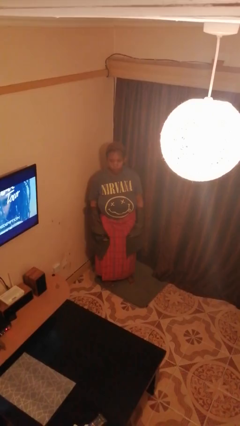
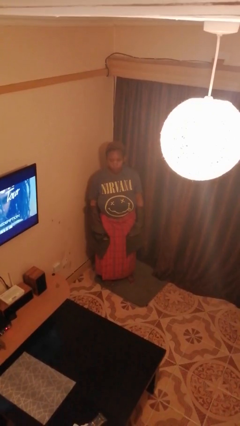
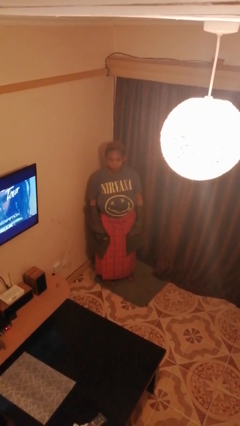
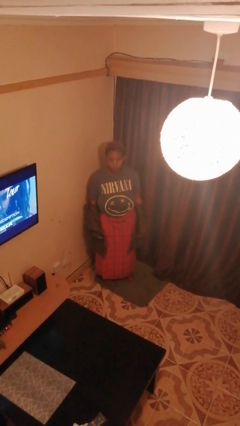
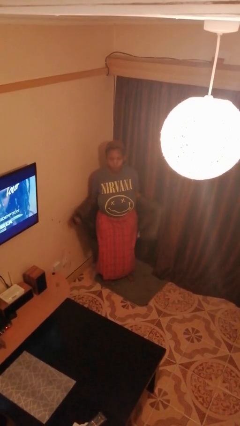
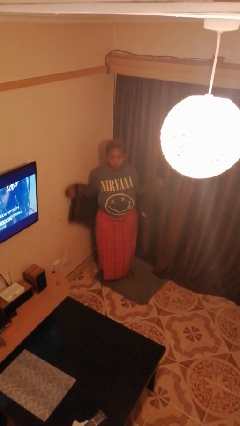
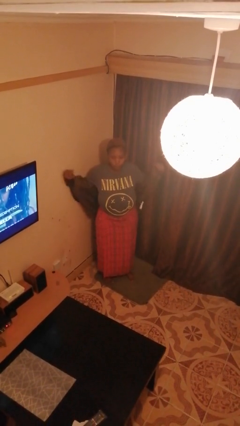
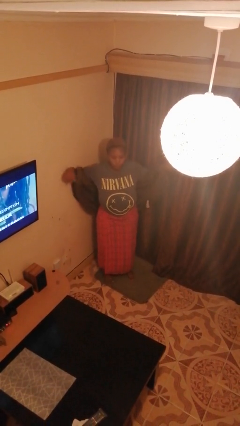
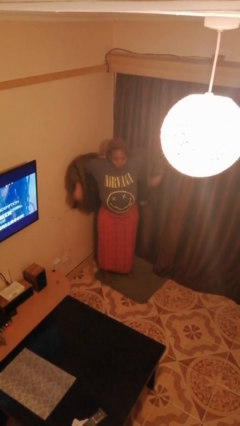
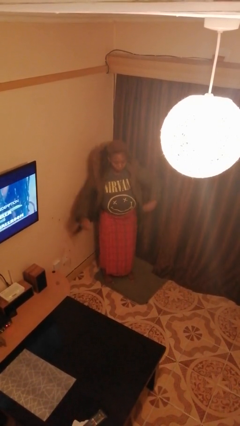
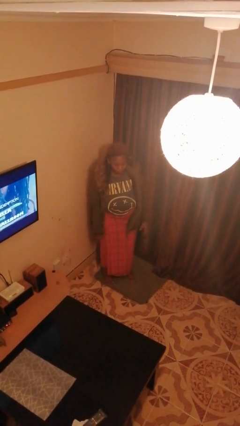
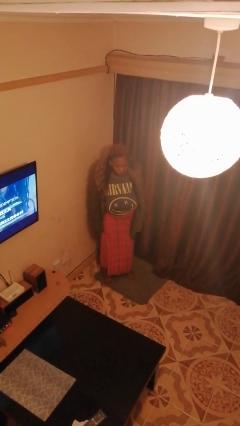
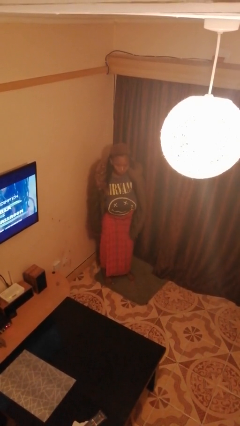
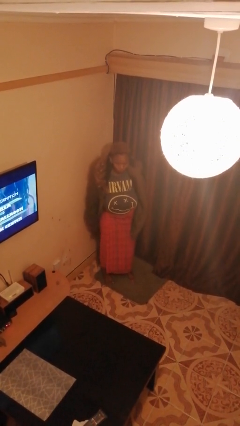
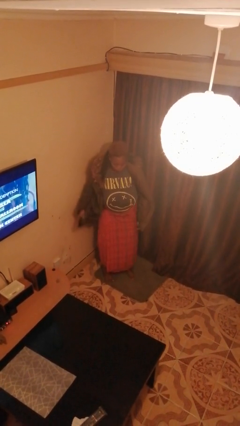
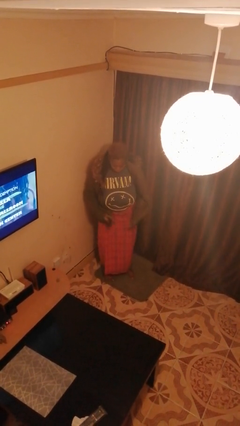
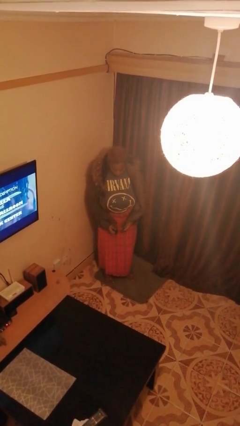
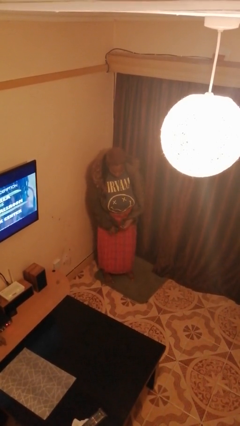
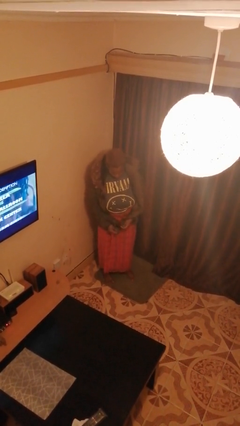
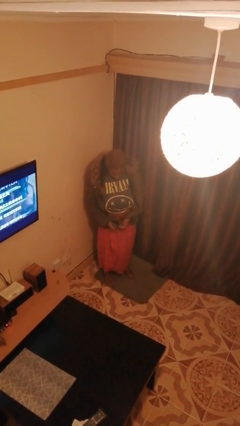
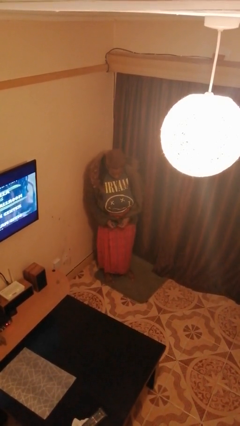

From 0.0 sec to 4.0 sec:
person puts on jacket

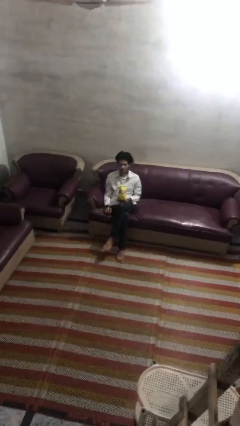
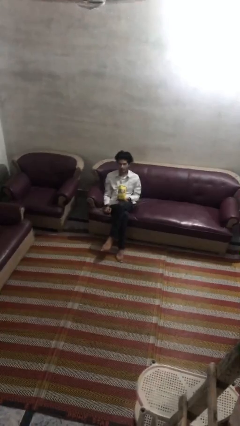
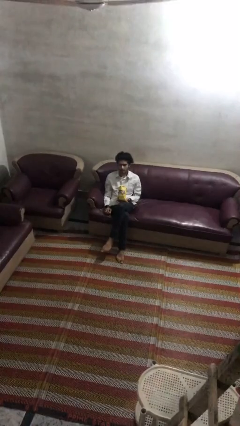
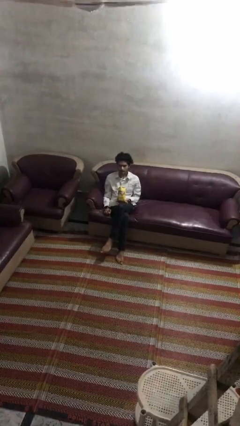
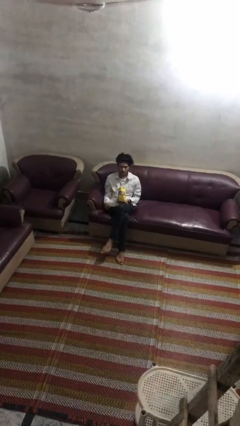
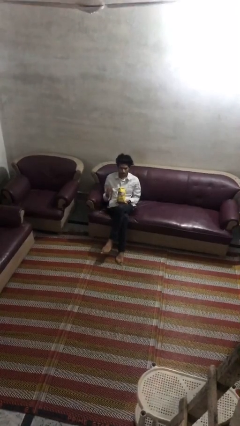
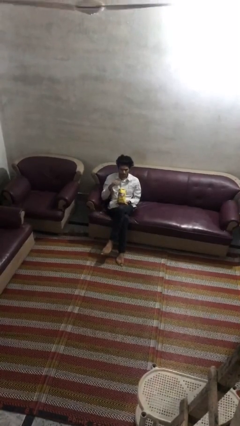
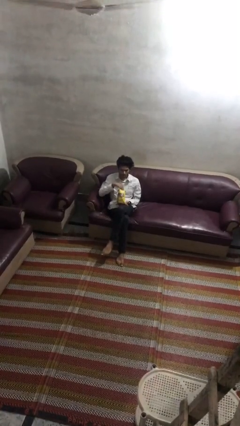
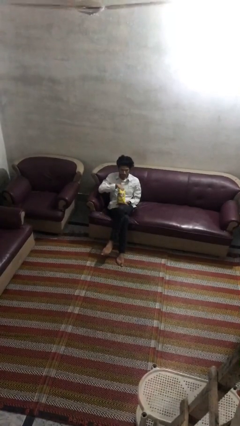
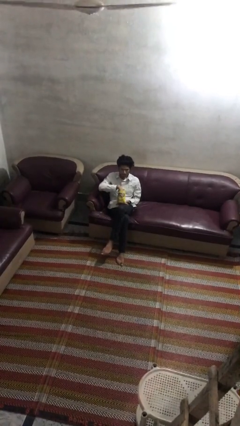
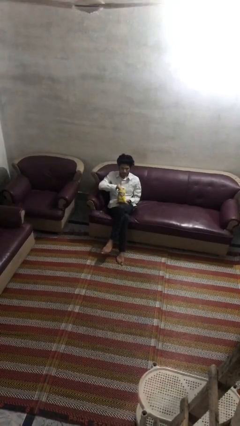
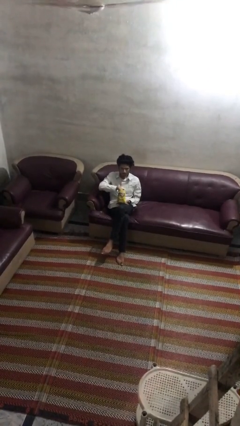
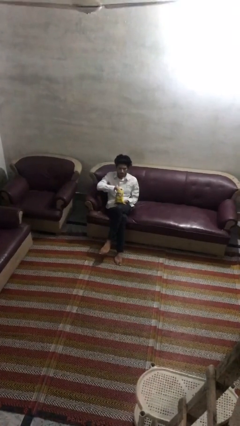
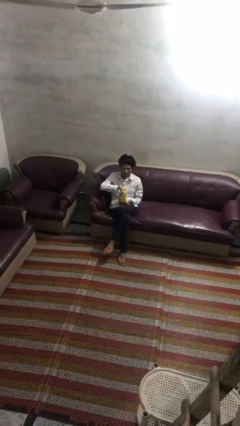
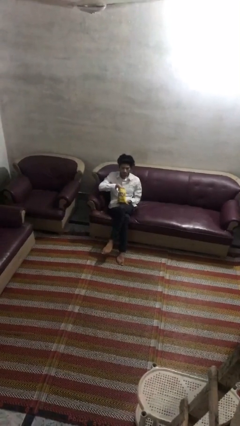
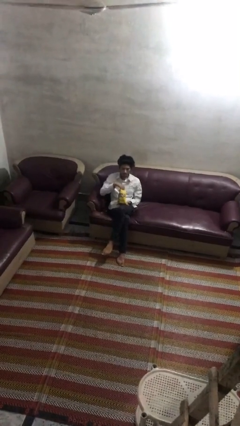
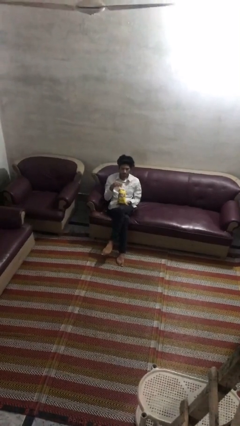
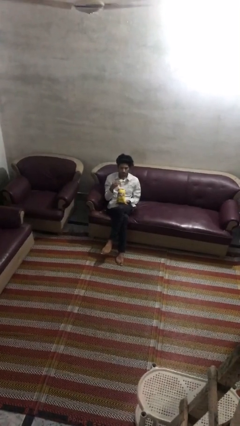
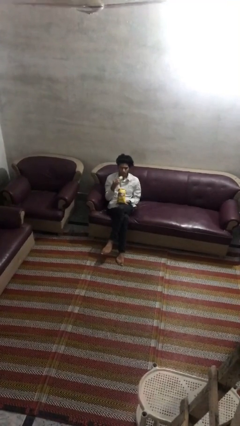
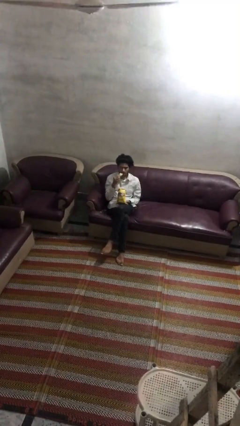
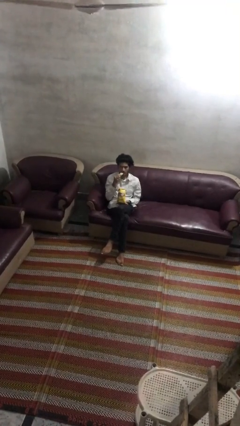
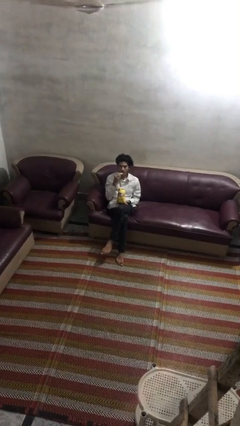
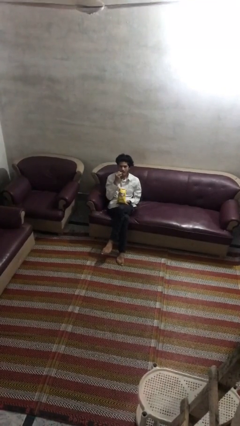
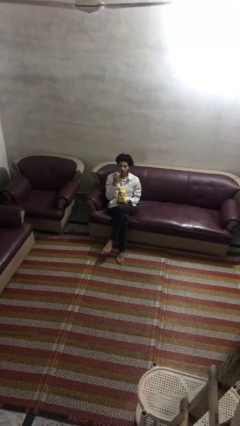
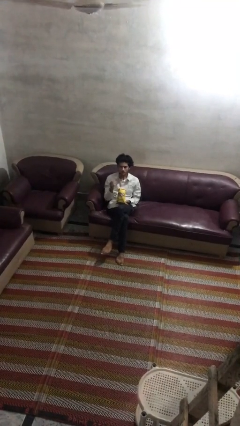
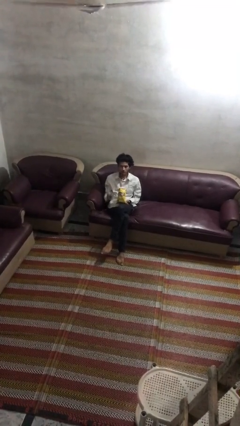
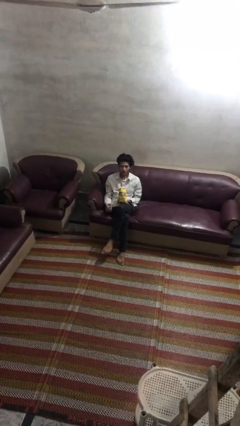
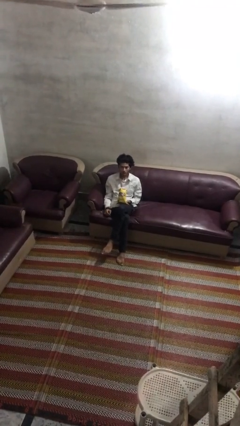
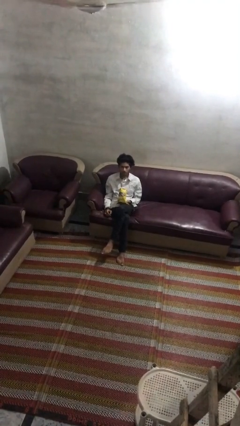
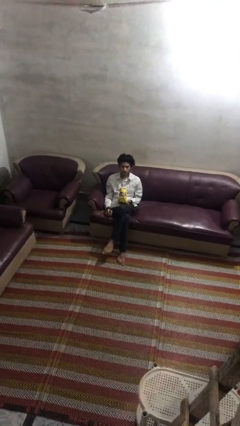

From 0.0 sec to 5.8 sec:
person eats snack from bag

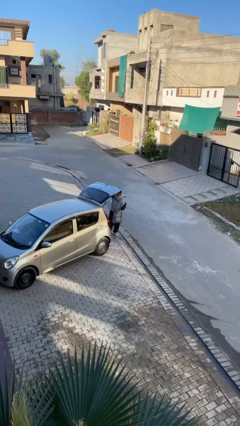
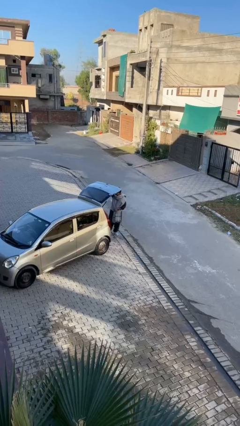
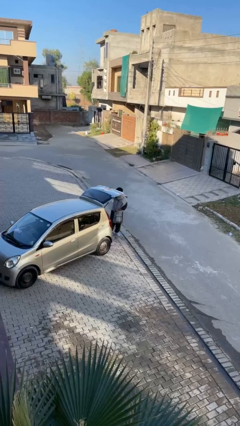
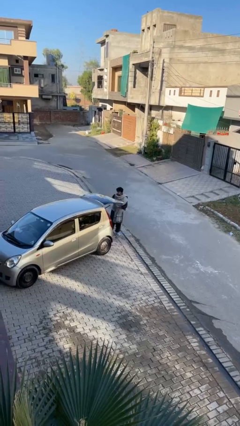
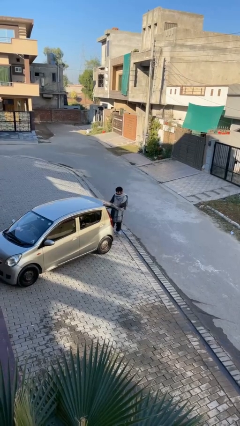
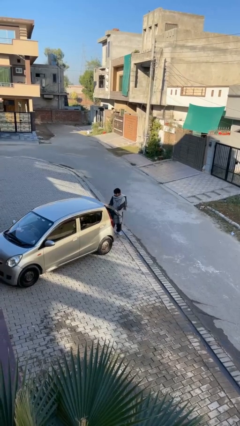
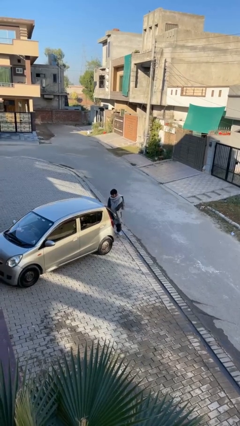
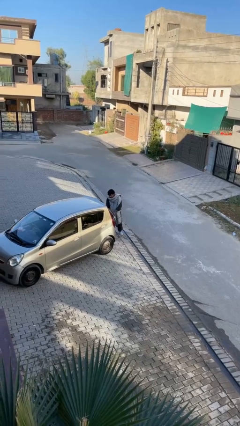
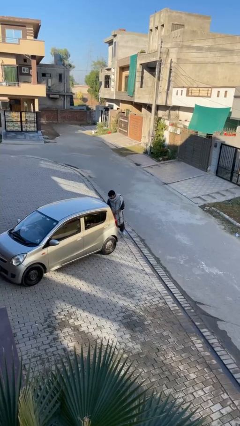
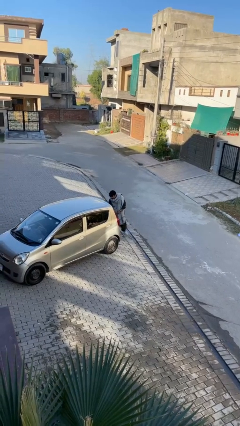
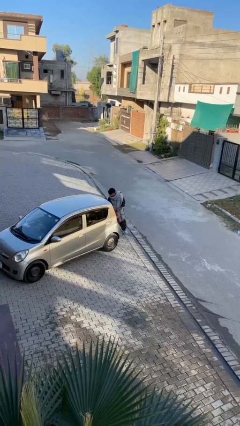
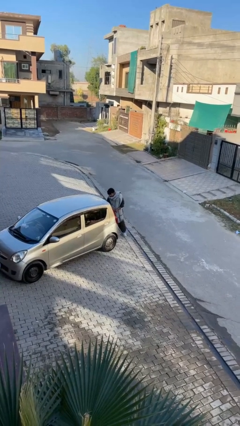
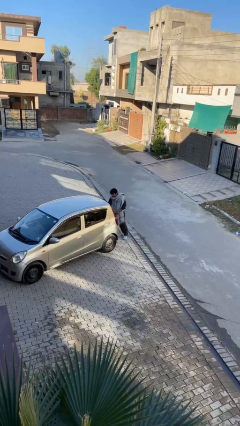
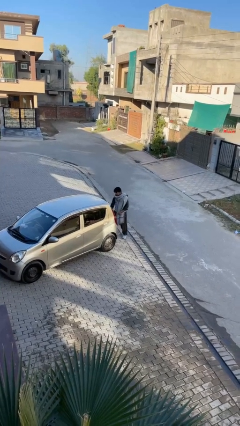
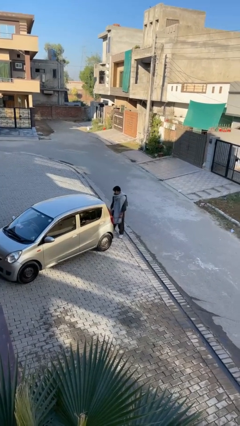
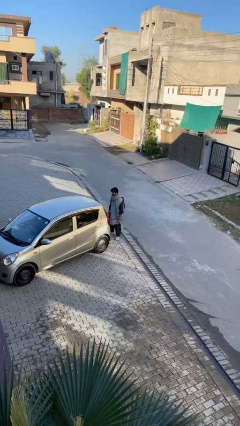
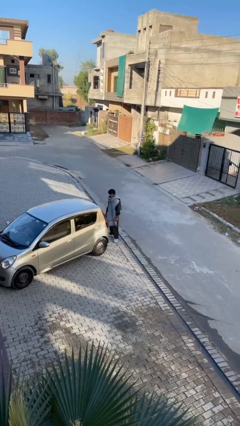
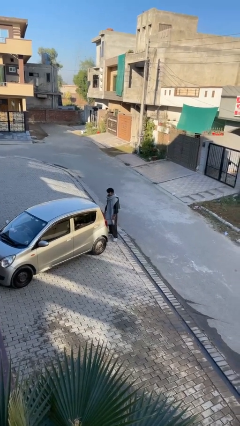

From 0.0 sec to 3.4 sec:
person closes car trunk

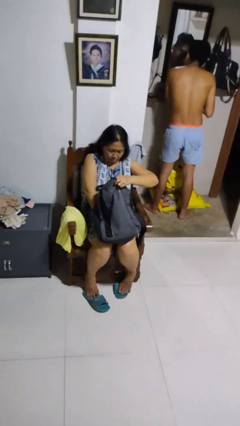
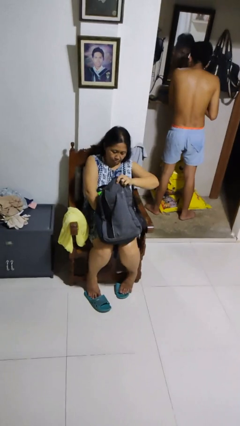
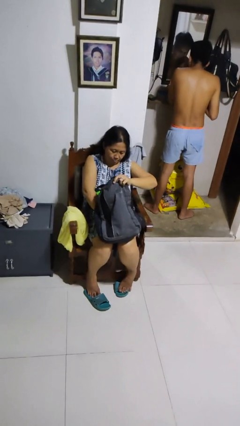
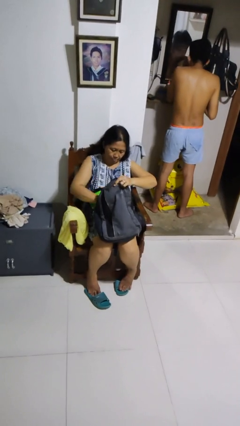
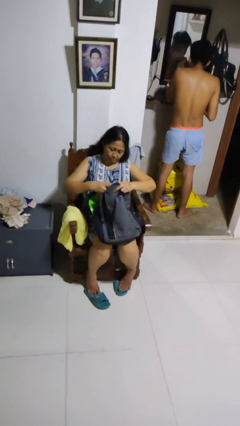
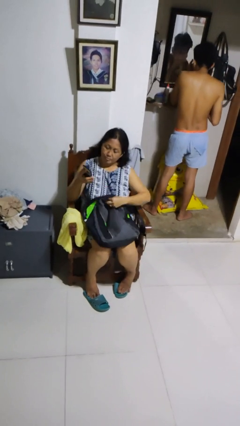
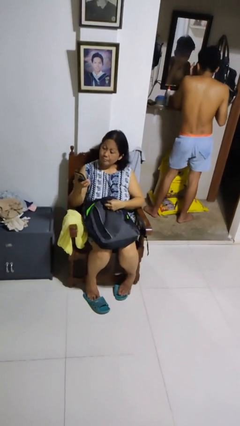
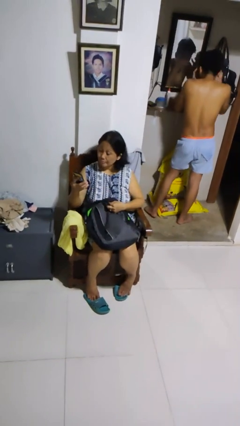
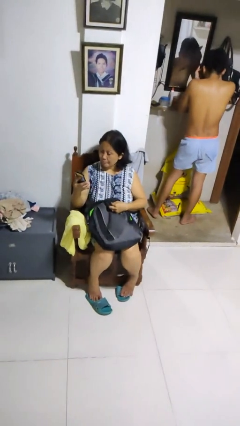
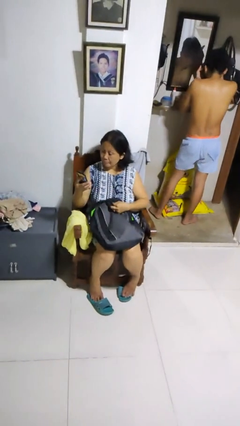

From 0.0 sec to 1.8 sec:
person takes object from backpack

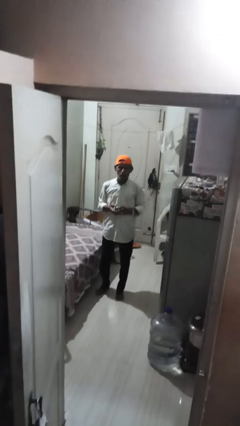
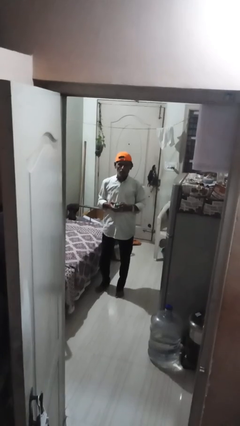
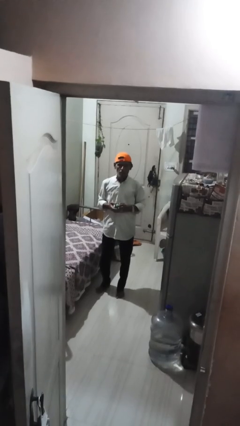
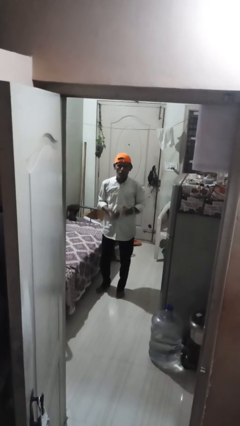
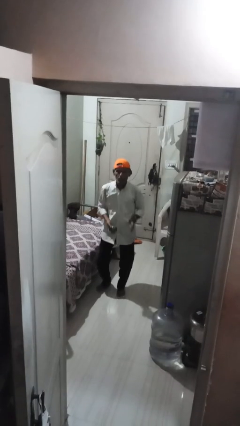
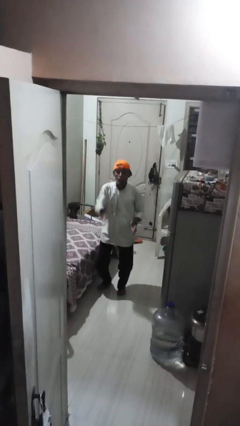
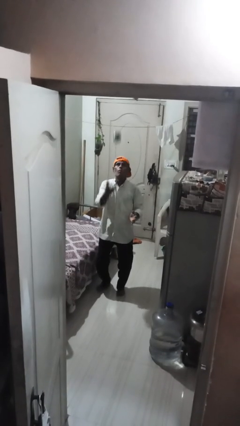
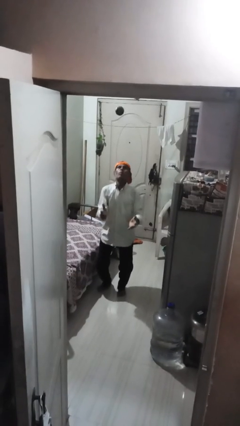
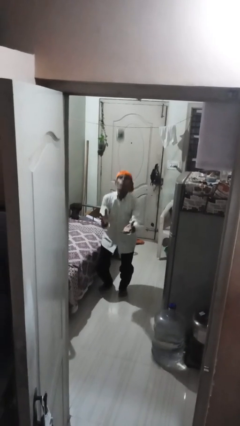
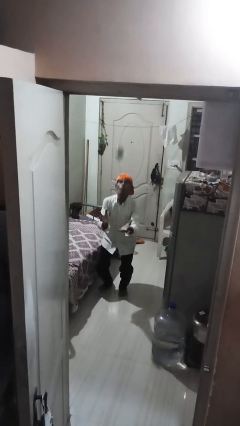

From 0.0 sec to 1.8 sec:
person drops object

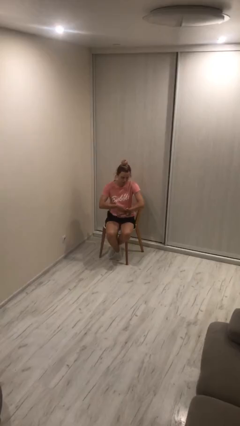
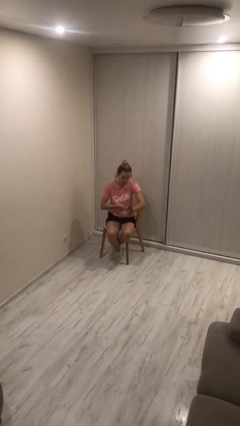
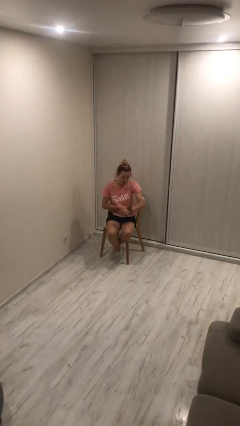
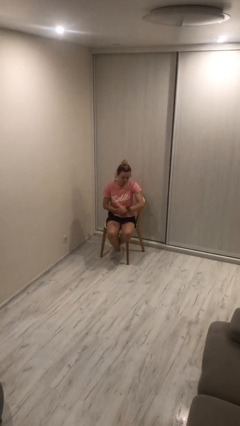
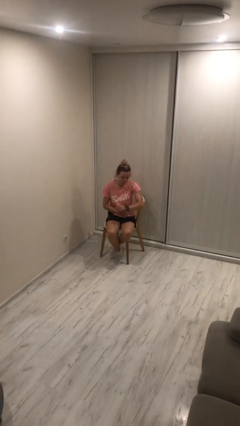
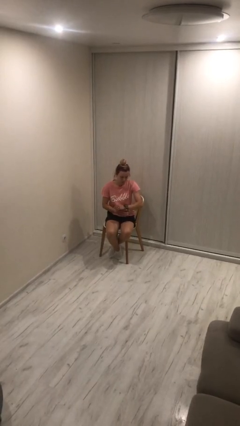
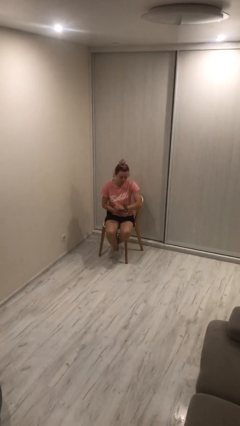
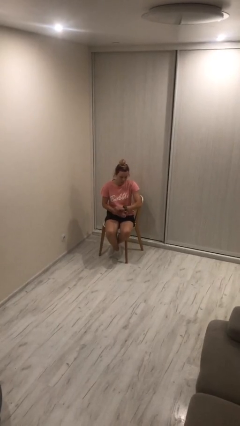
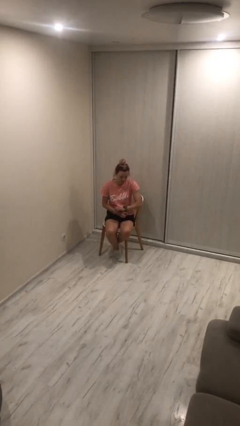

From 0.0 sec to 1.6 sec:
person puts on wristwatch
